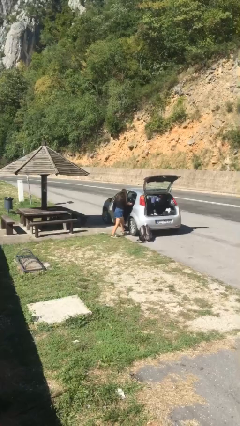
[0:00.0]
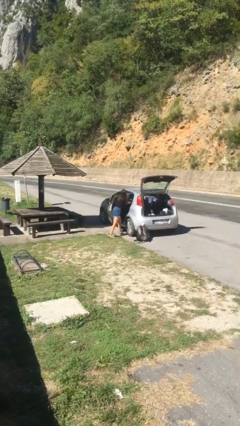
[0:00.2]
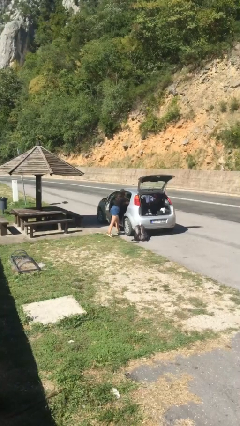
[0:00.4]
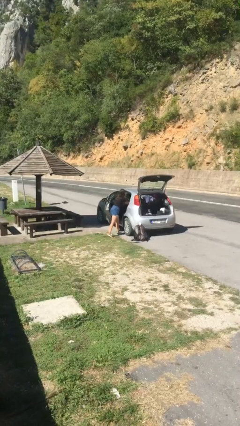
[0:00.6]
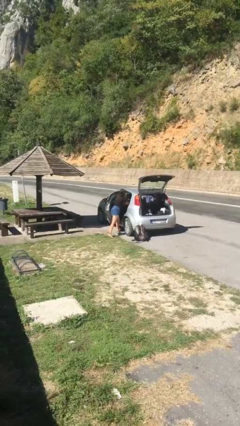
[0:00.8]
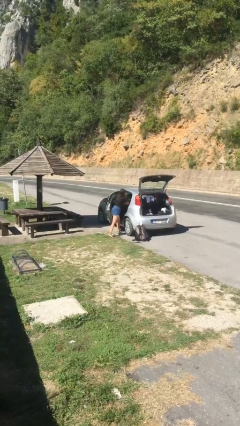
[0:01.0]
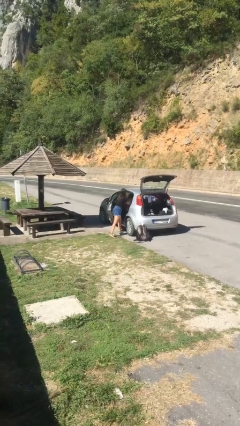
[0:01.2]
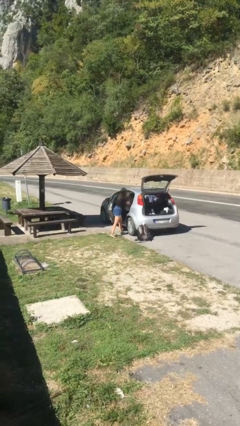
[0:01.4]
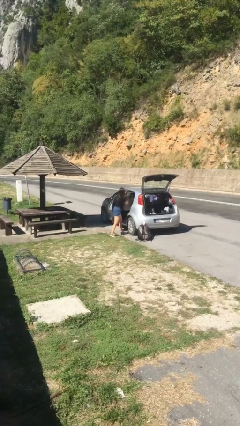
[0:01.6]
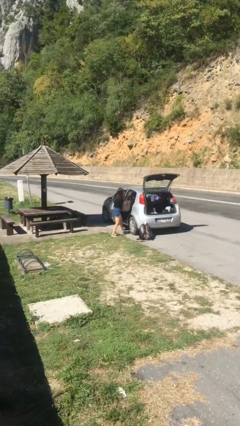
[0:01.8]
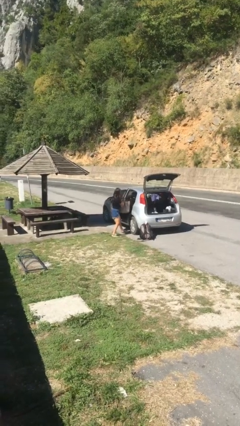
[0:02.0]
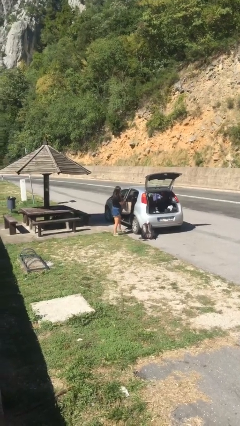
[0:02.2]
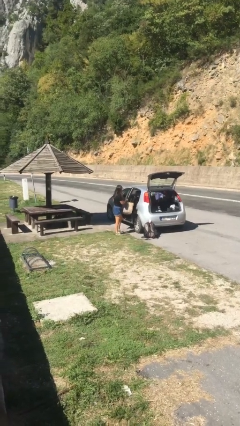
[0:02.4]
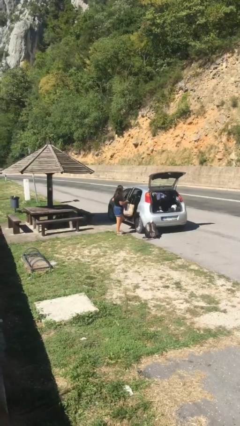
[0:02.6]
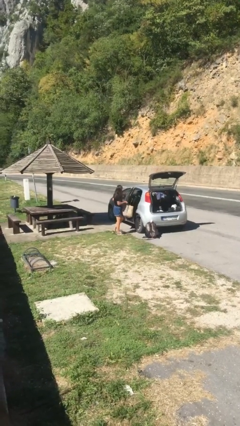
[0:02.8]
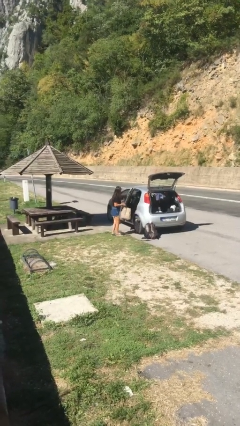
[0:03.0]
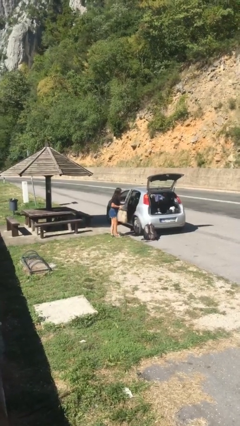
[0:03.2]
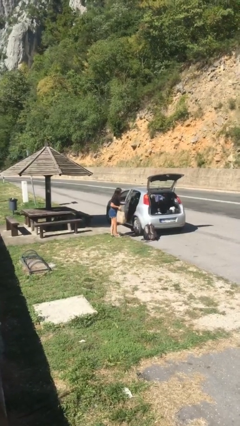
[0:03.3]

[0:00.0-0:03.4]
person unloads car

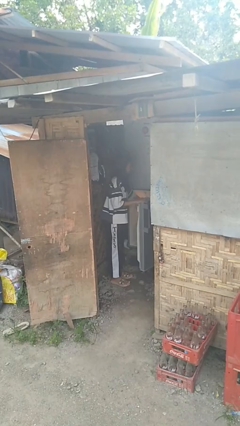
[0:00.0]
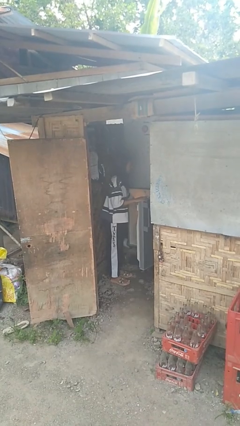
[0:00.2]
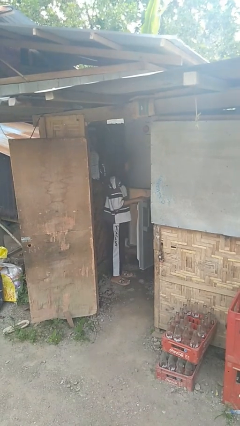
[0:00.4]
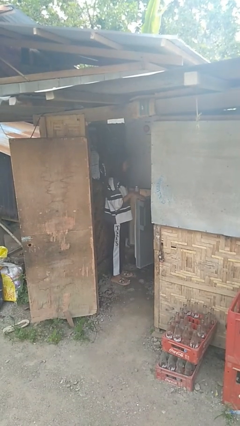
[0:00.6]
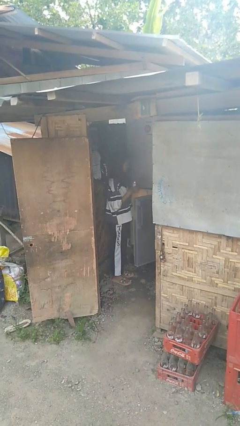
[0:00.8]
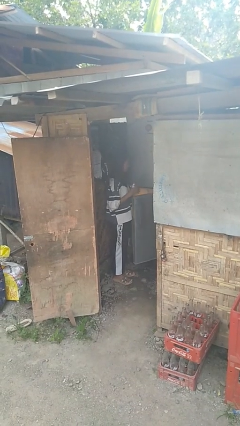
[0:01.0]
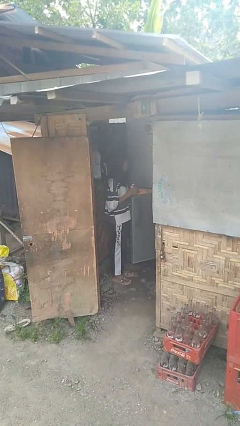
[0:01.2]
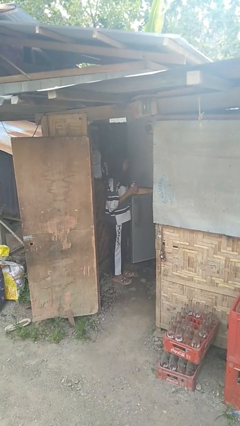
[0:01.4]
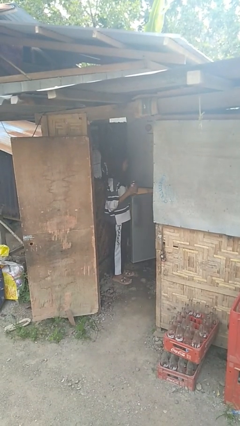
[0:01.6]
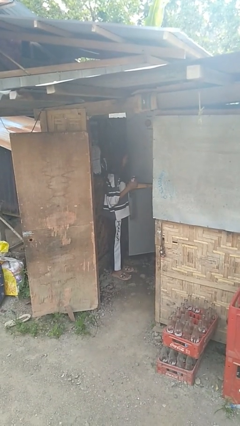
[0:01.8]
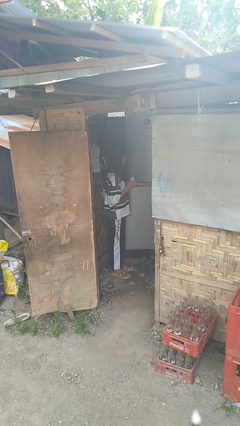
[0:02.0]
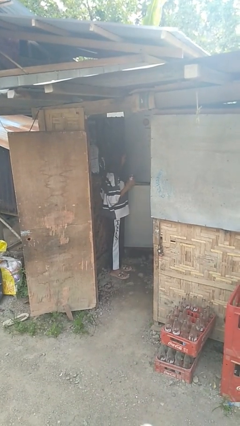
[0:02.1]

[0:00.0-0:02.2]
person takes object from refrigerator

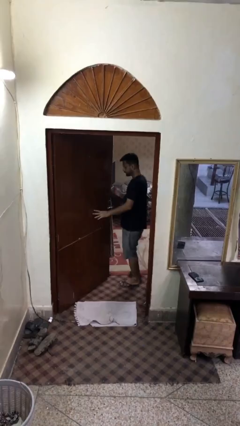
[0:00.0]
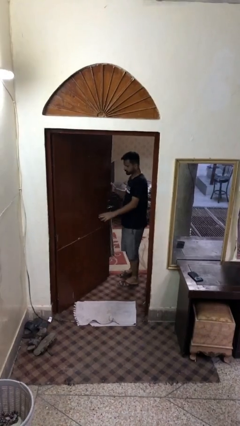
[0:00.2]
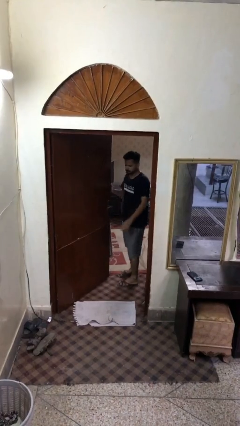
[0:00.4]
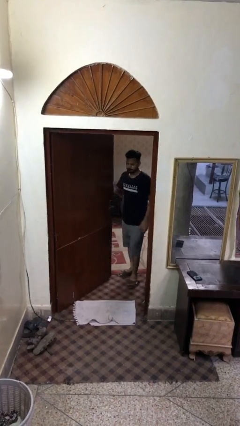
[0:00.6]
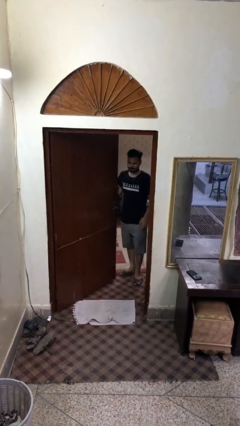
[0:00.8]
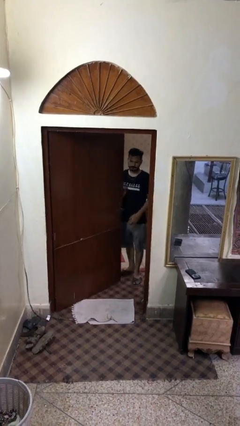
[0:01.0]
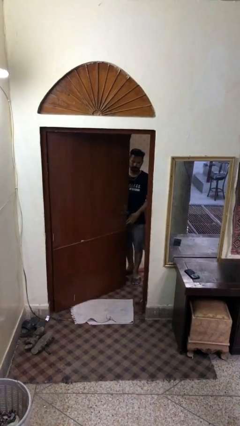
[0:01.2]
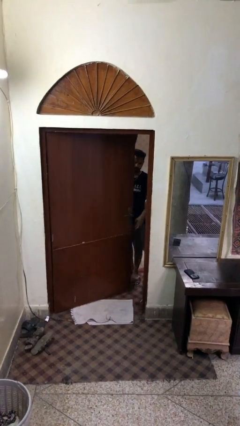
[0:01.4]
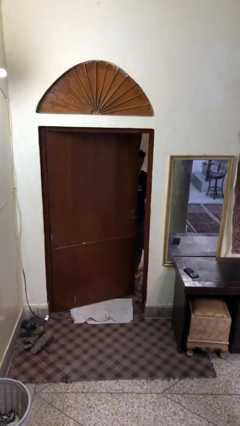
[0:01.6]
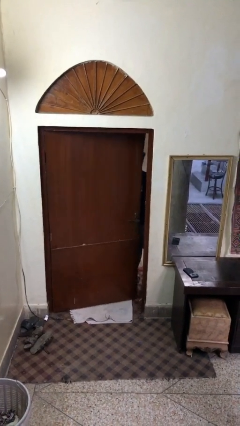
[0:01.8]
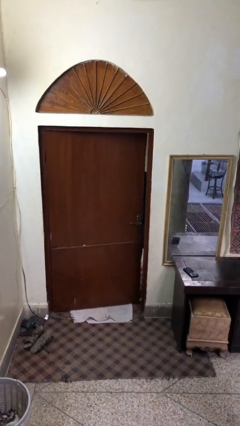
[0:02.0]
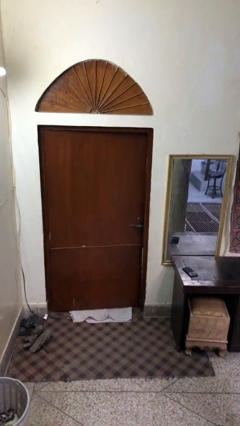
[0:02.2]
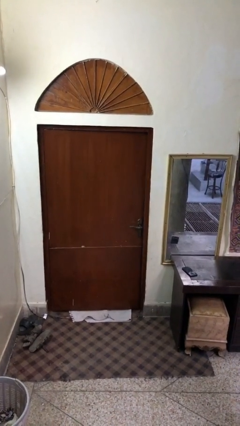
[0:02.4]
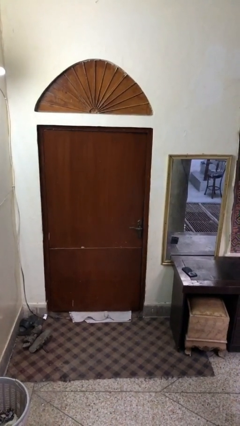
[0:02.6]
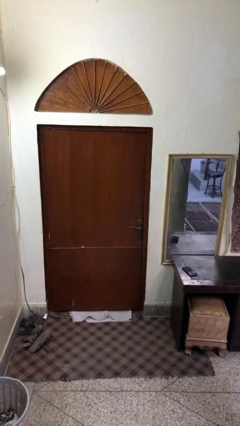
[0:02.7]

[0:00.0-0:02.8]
person closes facility door

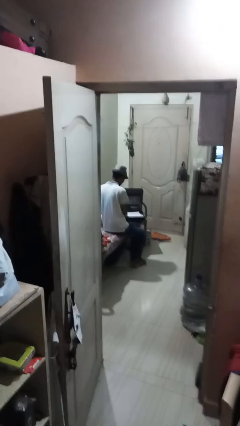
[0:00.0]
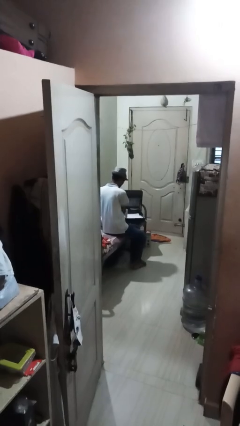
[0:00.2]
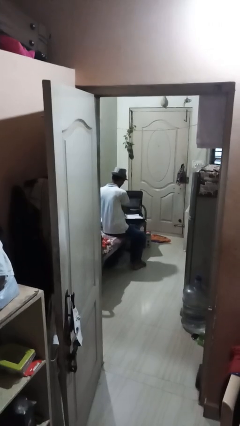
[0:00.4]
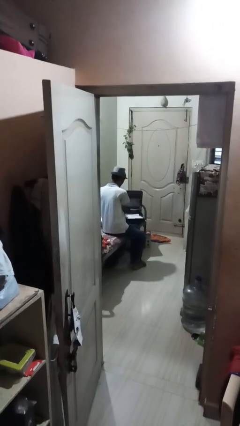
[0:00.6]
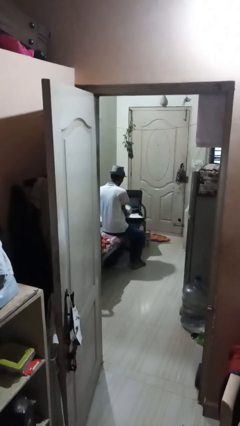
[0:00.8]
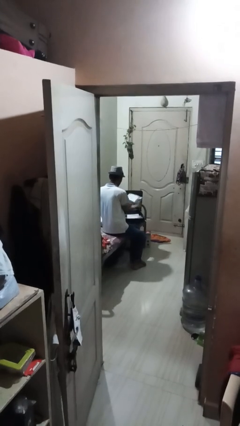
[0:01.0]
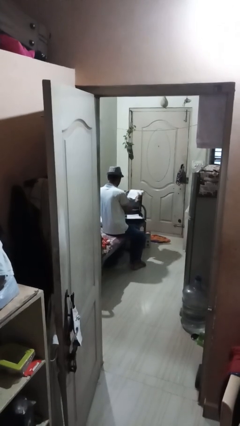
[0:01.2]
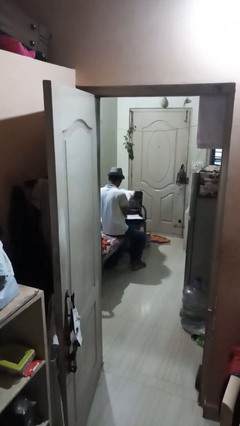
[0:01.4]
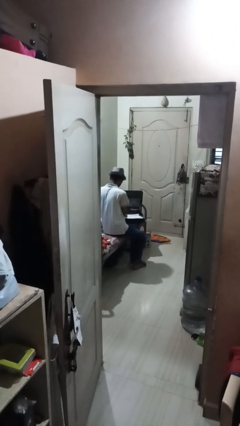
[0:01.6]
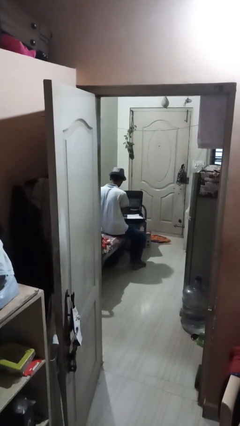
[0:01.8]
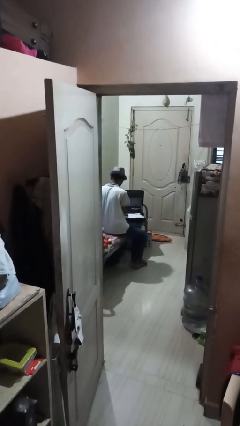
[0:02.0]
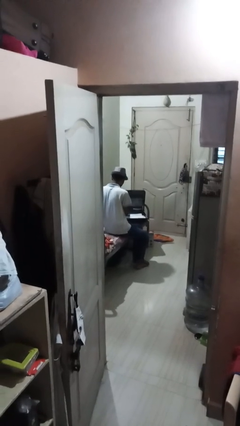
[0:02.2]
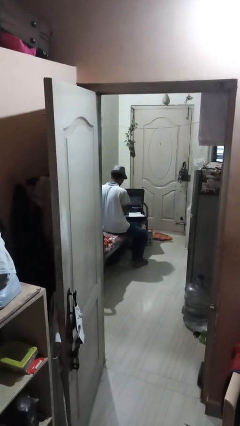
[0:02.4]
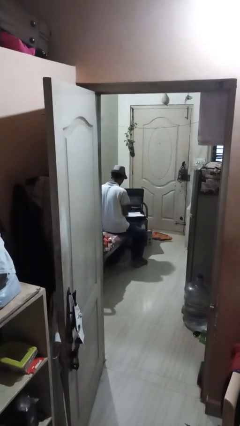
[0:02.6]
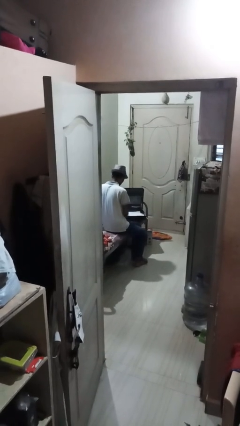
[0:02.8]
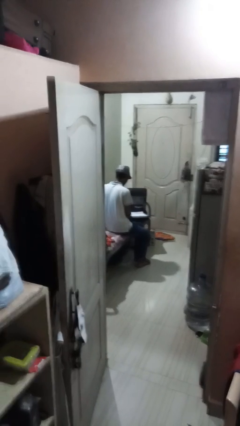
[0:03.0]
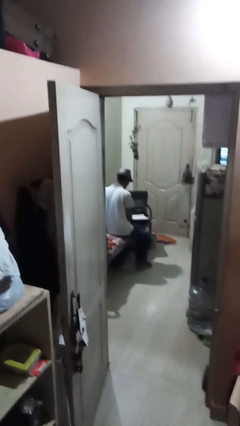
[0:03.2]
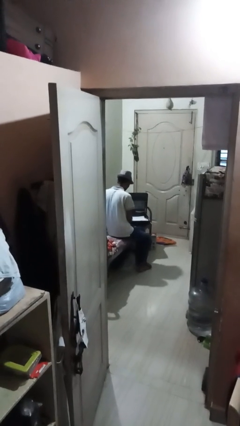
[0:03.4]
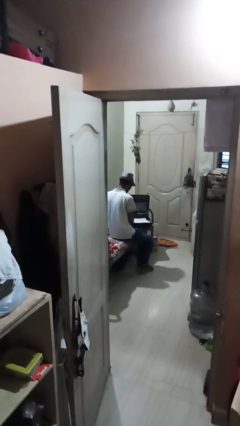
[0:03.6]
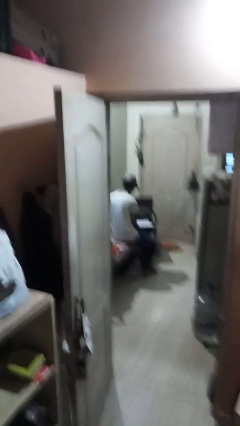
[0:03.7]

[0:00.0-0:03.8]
person unloads clothes from suitcase

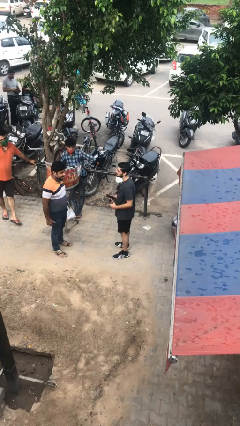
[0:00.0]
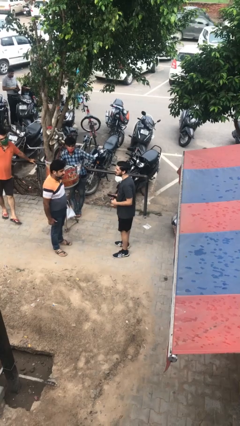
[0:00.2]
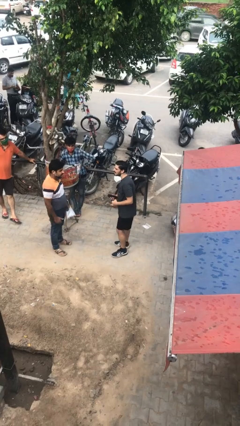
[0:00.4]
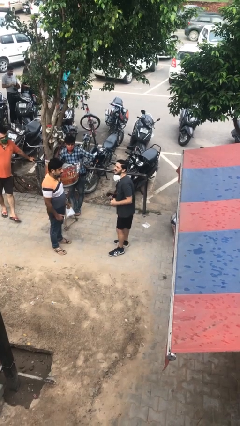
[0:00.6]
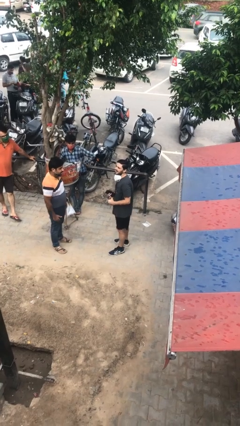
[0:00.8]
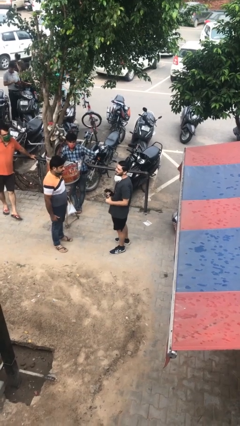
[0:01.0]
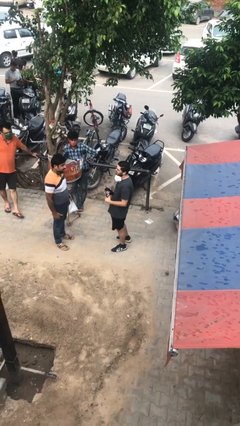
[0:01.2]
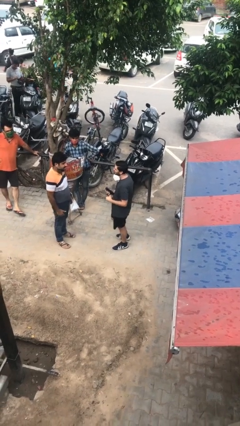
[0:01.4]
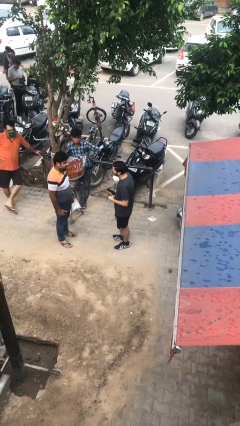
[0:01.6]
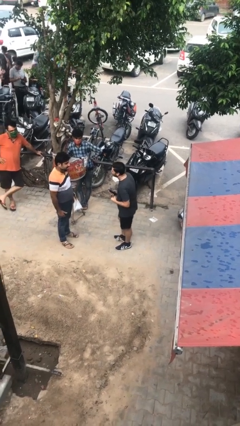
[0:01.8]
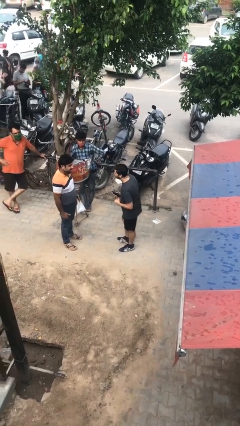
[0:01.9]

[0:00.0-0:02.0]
person laughs with person

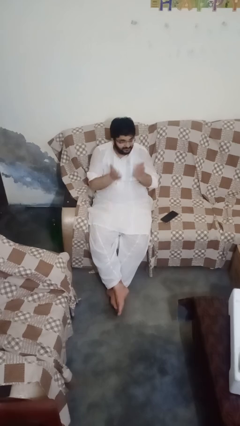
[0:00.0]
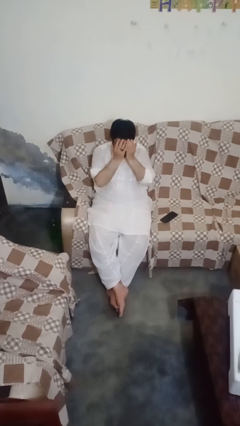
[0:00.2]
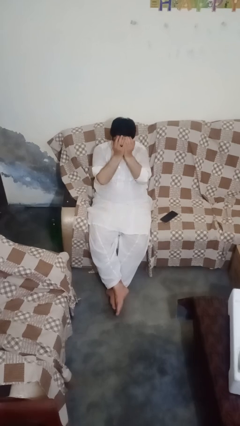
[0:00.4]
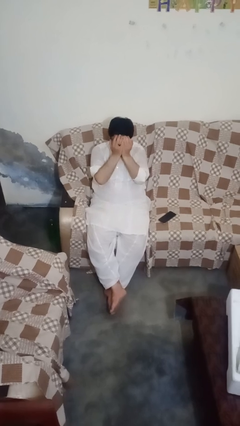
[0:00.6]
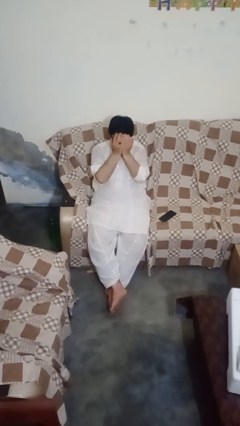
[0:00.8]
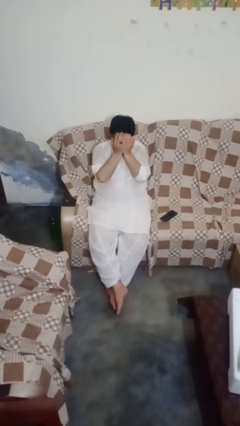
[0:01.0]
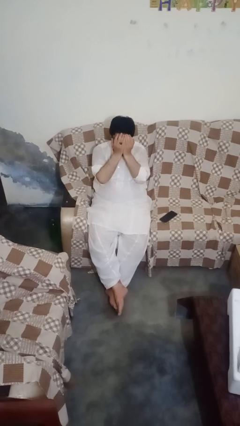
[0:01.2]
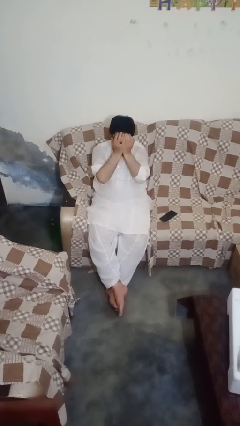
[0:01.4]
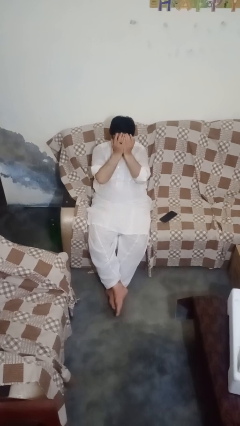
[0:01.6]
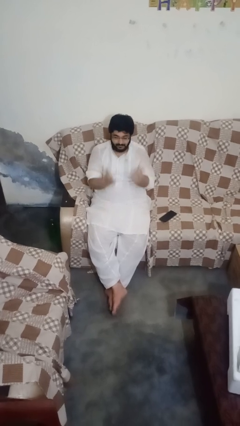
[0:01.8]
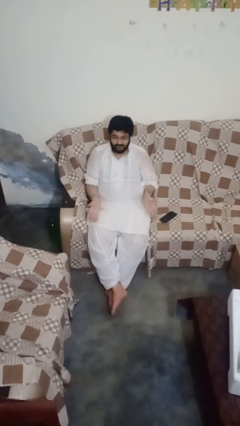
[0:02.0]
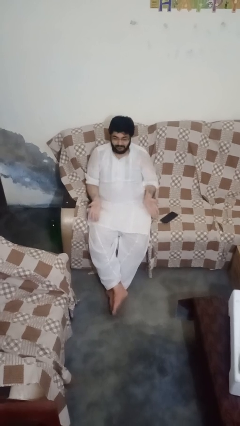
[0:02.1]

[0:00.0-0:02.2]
person covers face with hands

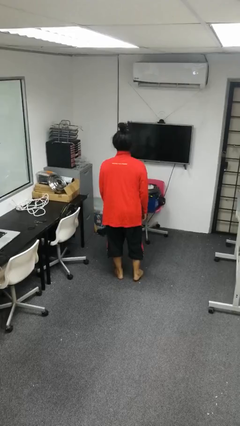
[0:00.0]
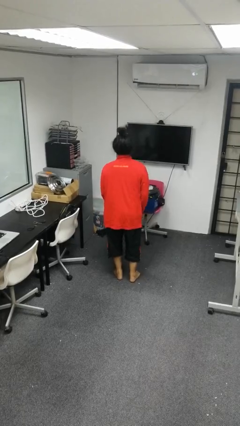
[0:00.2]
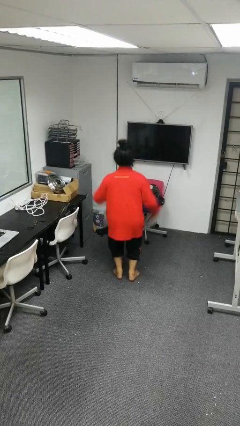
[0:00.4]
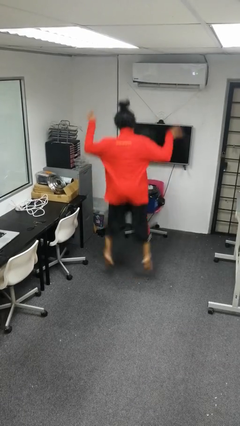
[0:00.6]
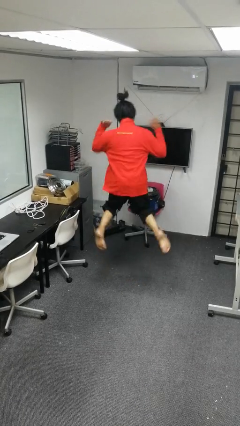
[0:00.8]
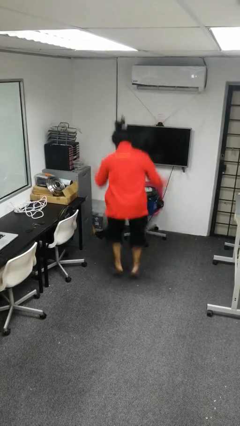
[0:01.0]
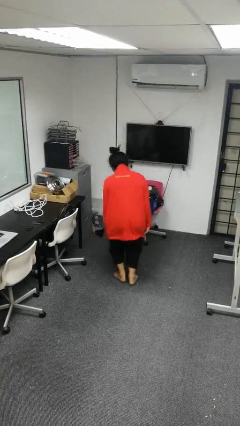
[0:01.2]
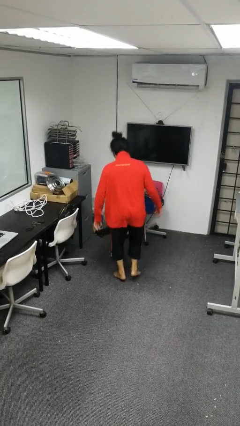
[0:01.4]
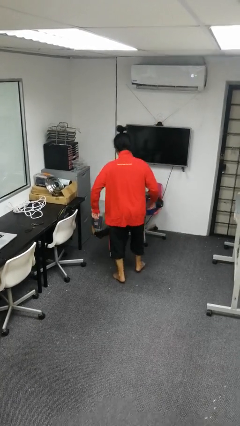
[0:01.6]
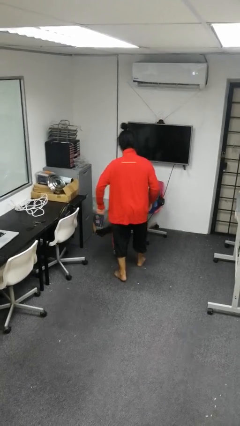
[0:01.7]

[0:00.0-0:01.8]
person jumps
